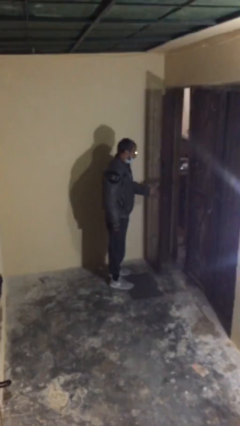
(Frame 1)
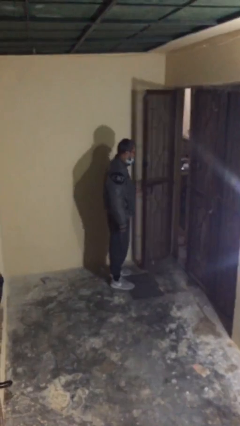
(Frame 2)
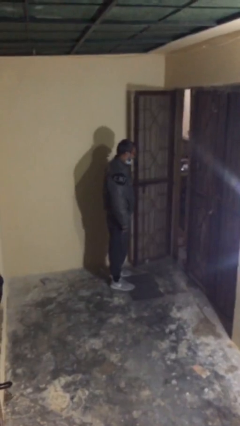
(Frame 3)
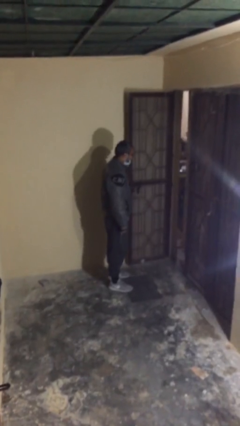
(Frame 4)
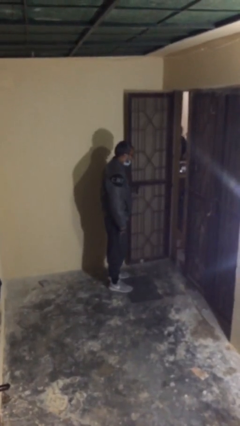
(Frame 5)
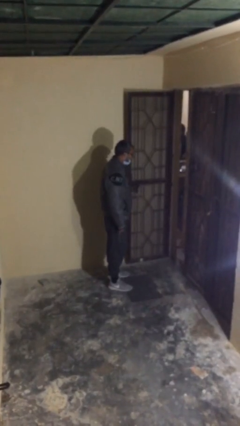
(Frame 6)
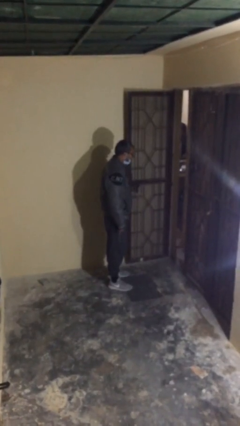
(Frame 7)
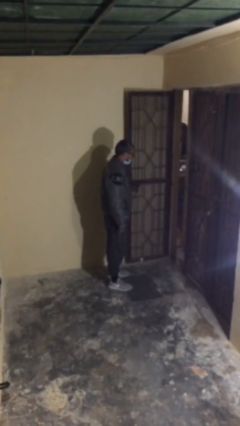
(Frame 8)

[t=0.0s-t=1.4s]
person opens facility door

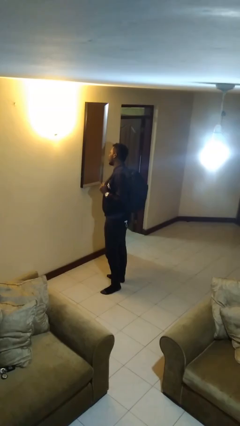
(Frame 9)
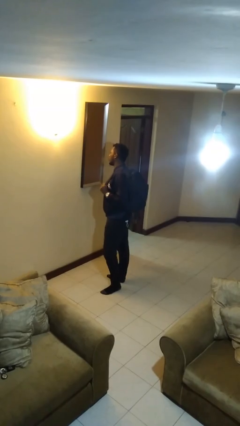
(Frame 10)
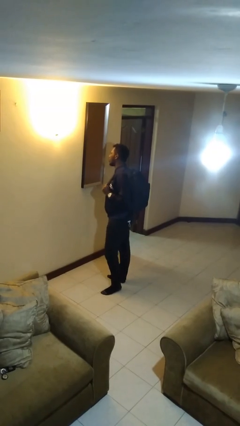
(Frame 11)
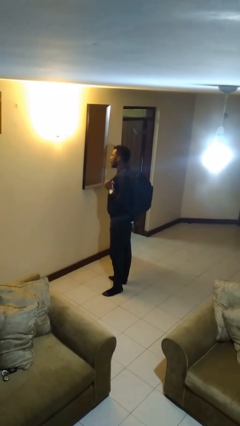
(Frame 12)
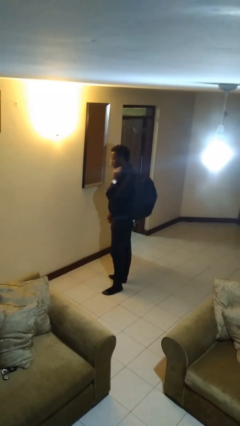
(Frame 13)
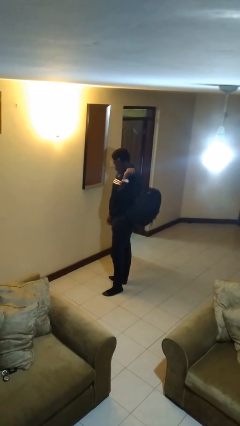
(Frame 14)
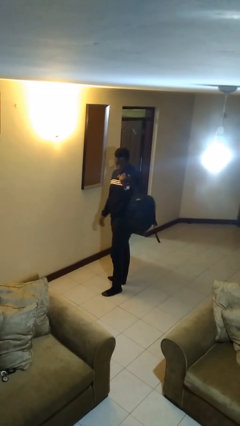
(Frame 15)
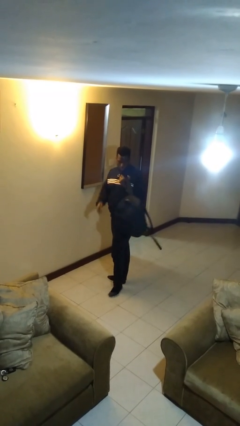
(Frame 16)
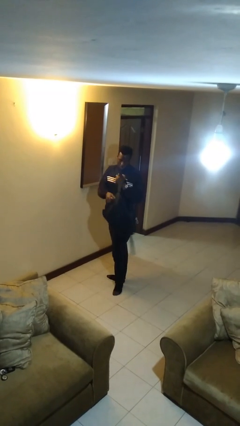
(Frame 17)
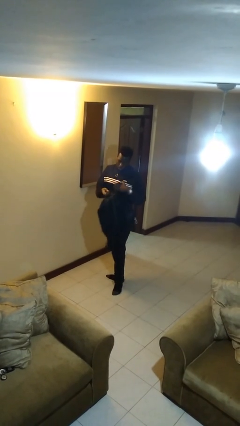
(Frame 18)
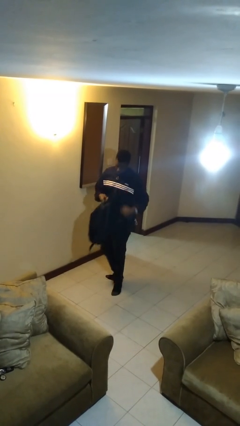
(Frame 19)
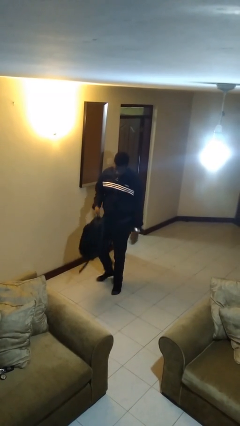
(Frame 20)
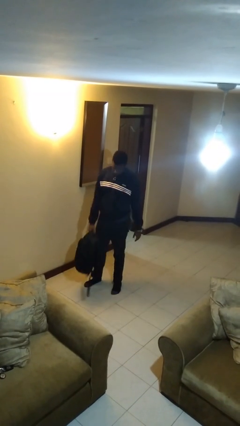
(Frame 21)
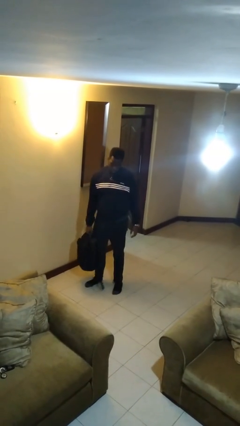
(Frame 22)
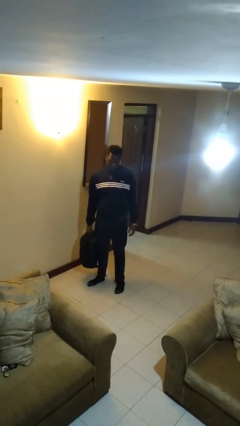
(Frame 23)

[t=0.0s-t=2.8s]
person takes off backpack

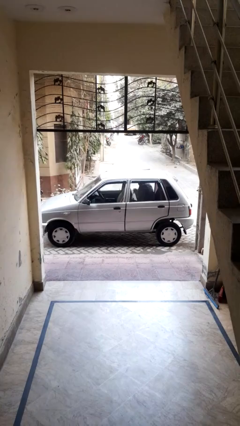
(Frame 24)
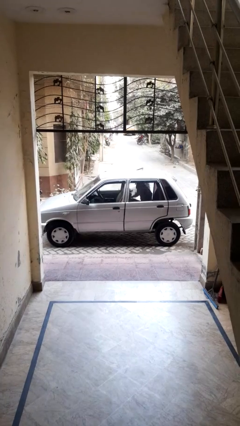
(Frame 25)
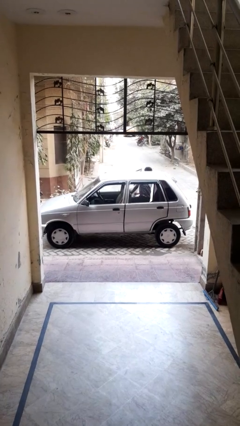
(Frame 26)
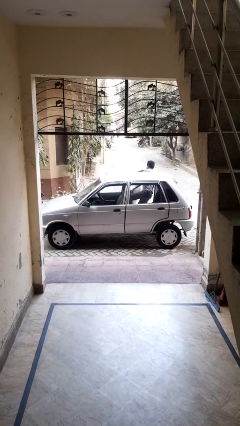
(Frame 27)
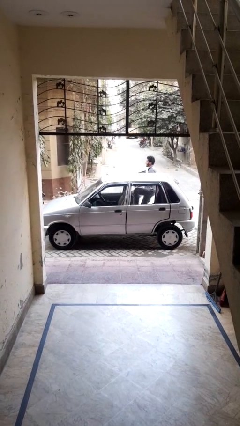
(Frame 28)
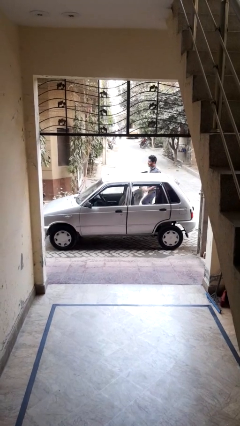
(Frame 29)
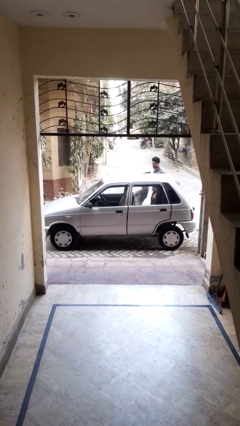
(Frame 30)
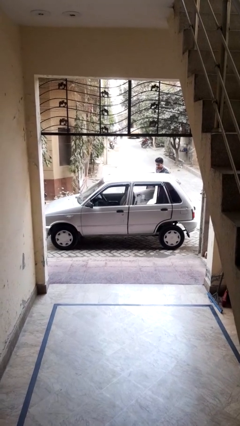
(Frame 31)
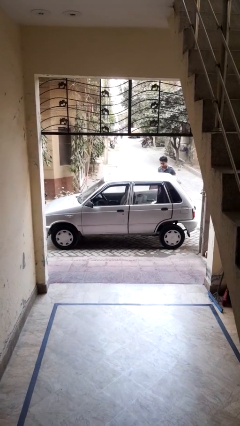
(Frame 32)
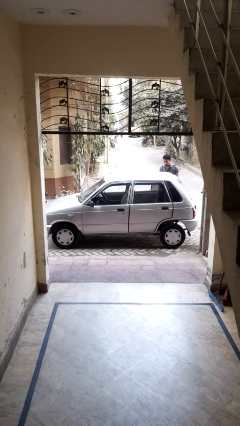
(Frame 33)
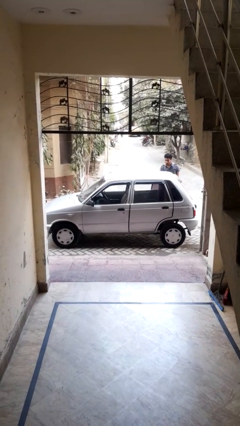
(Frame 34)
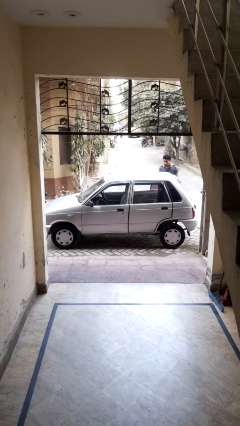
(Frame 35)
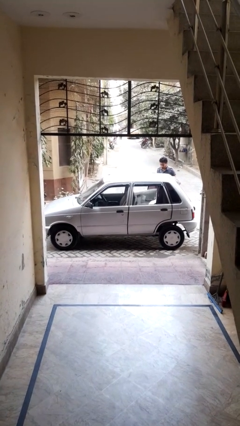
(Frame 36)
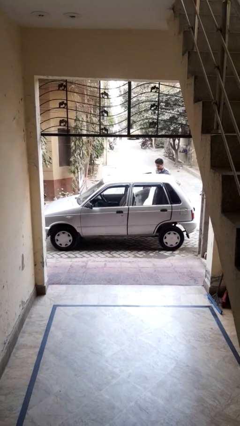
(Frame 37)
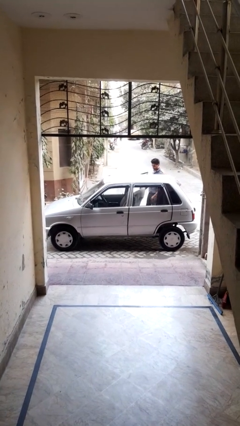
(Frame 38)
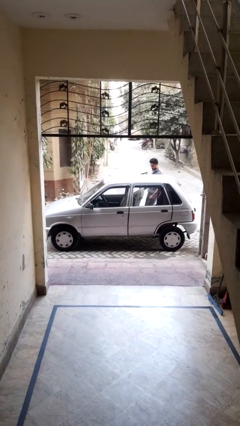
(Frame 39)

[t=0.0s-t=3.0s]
car drops off person

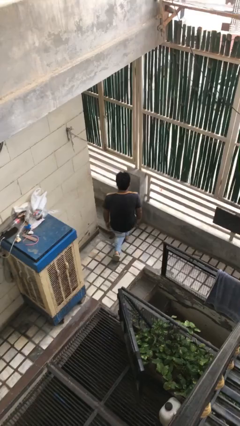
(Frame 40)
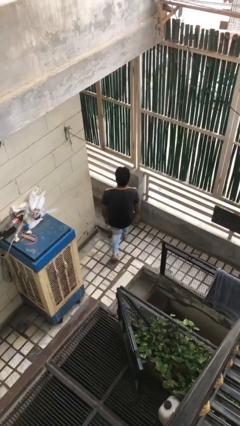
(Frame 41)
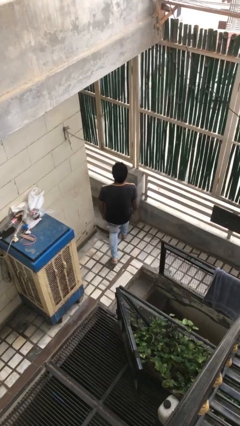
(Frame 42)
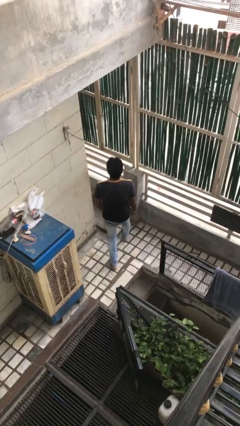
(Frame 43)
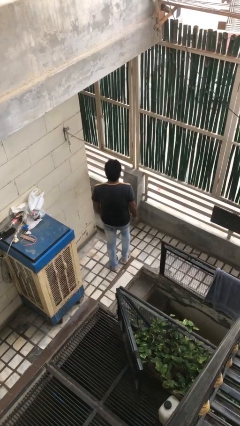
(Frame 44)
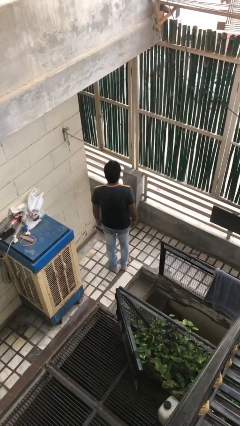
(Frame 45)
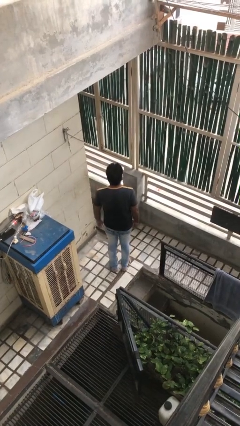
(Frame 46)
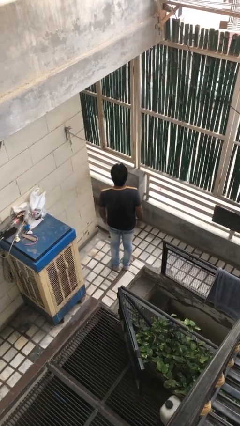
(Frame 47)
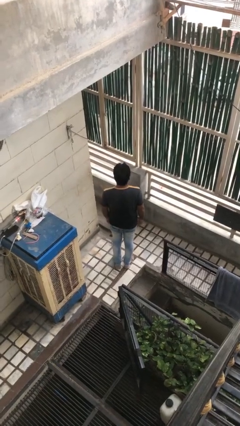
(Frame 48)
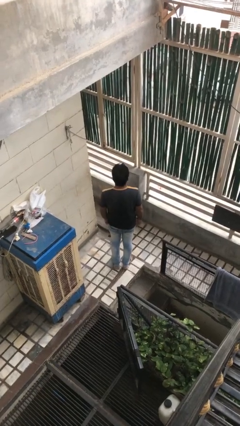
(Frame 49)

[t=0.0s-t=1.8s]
person stands up from floor

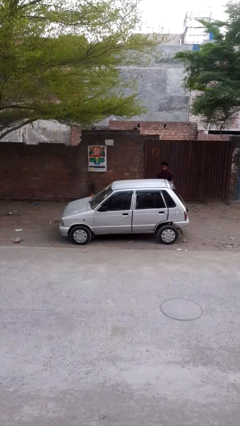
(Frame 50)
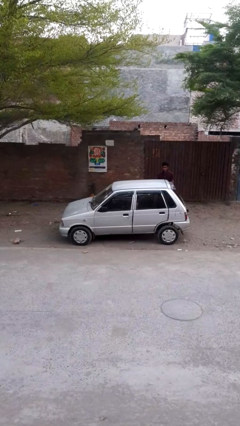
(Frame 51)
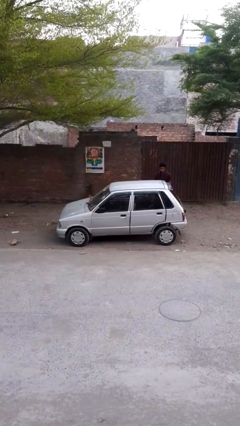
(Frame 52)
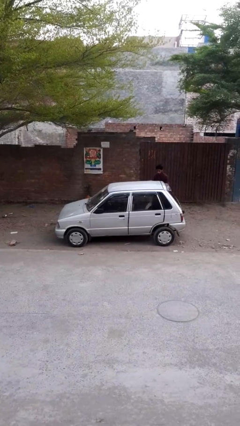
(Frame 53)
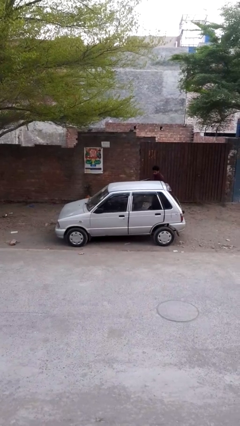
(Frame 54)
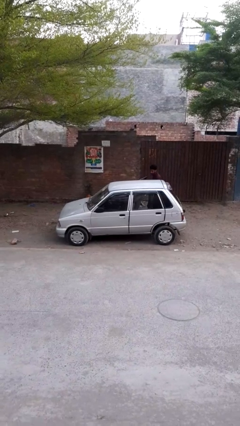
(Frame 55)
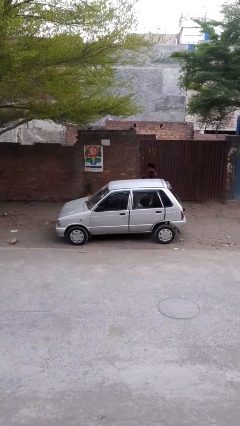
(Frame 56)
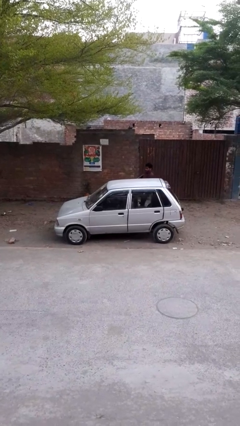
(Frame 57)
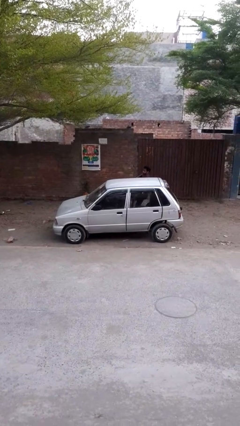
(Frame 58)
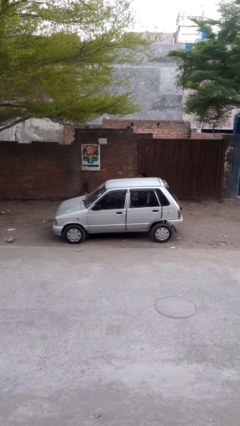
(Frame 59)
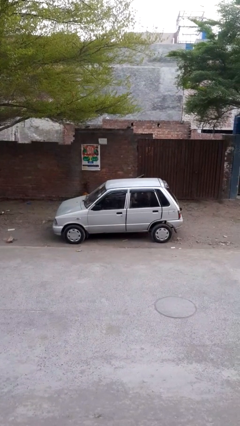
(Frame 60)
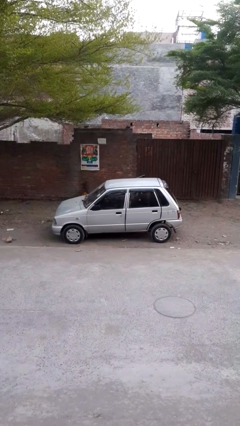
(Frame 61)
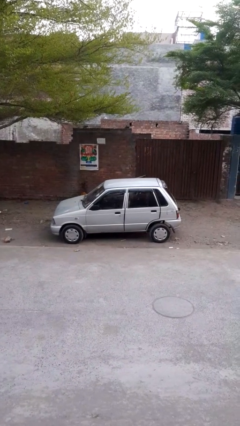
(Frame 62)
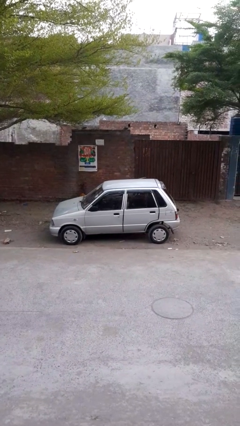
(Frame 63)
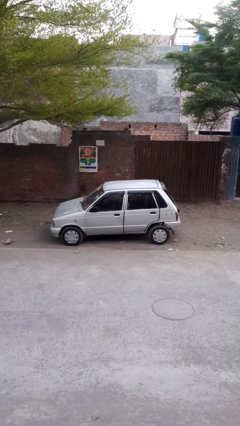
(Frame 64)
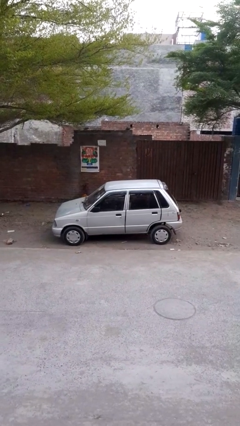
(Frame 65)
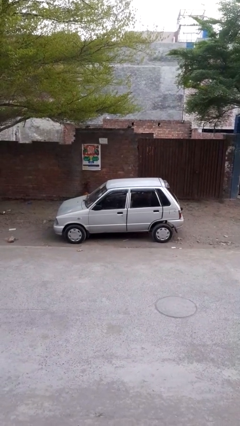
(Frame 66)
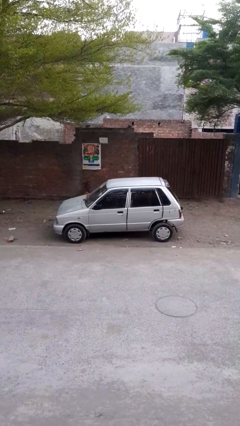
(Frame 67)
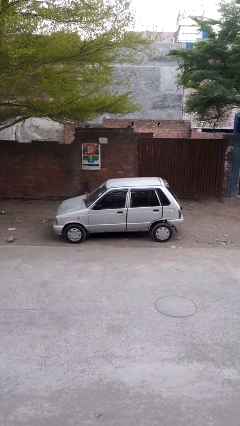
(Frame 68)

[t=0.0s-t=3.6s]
car picks up person

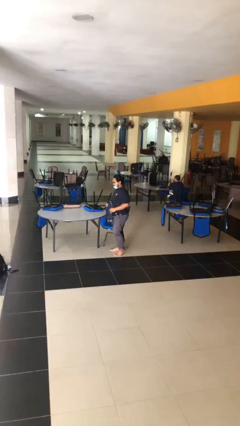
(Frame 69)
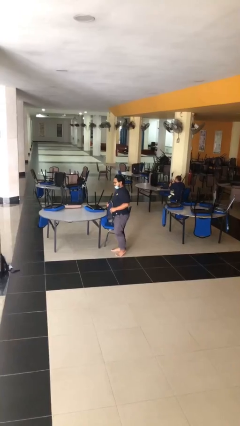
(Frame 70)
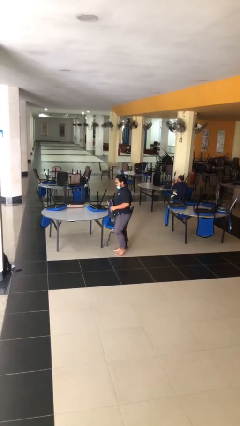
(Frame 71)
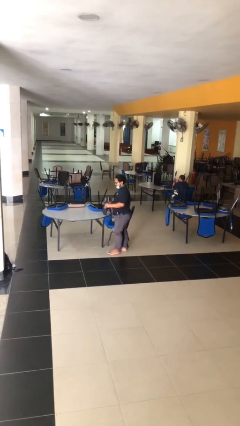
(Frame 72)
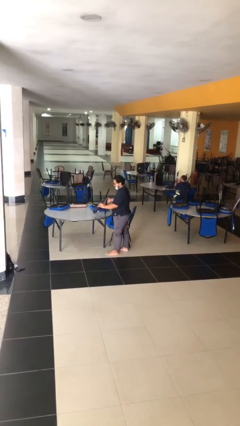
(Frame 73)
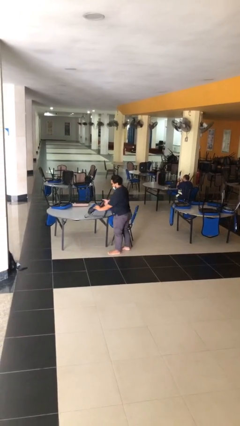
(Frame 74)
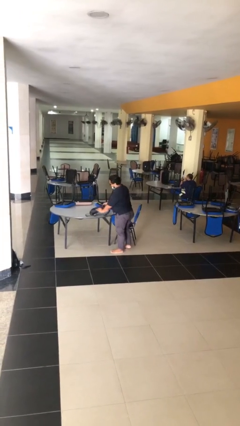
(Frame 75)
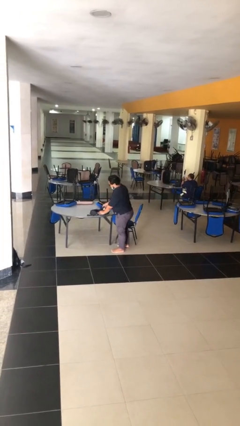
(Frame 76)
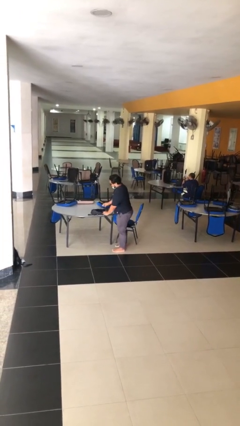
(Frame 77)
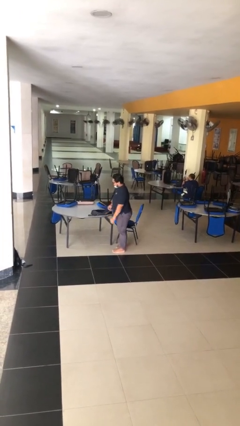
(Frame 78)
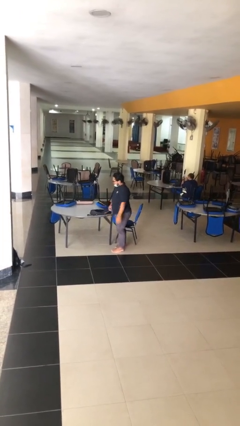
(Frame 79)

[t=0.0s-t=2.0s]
person puts down object on table

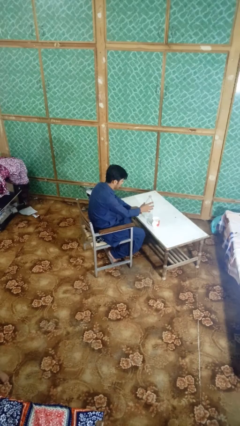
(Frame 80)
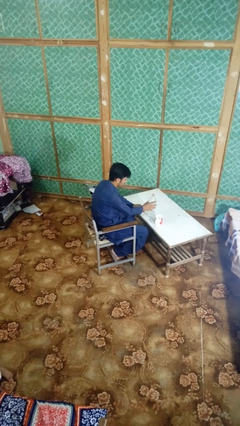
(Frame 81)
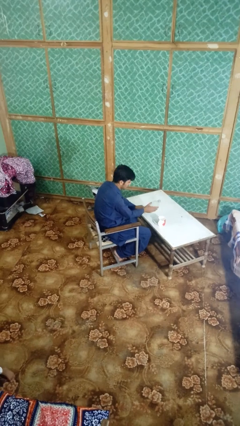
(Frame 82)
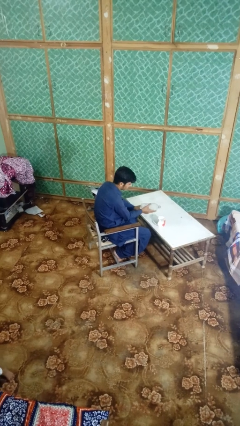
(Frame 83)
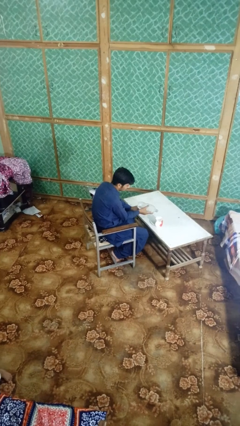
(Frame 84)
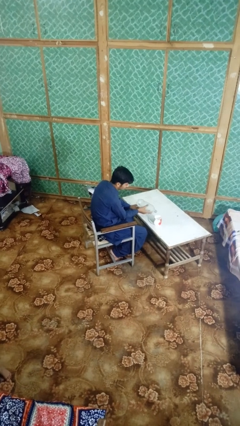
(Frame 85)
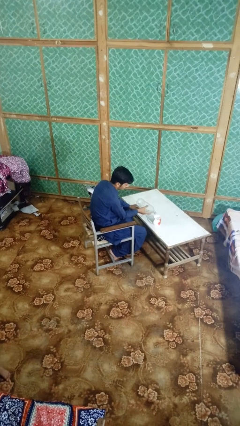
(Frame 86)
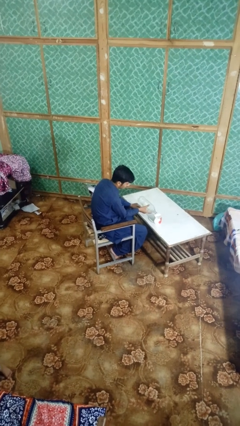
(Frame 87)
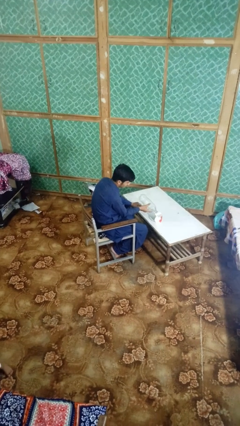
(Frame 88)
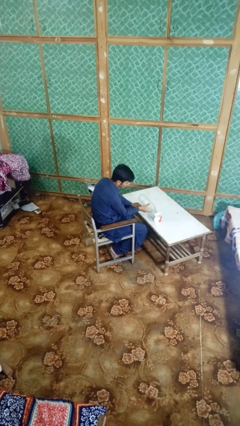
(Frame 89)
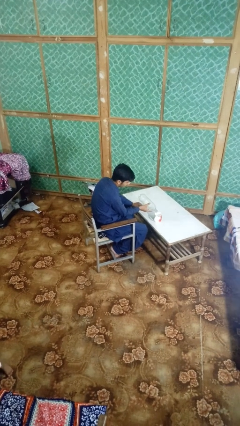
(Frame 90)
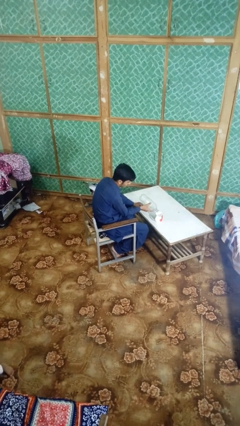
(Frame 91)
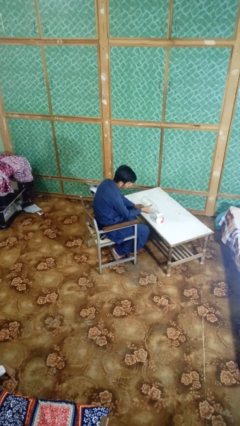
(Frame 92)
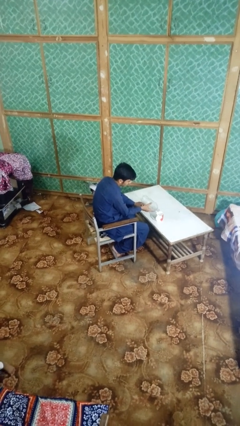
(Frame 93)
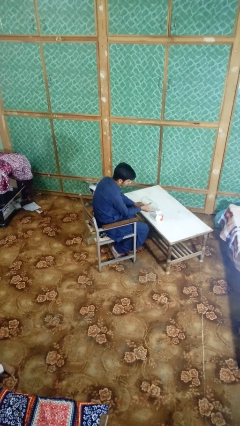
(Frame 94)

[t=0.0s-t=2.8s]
person pours liquid into cup
